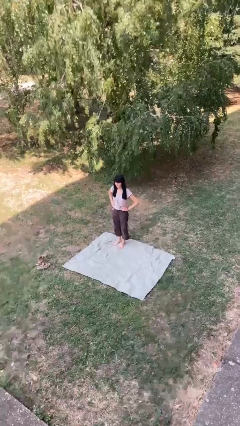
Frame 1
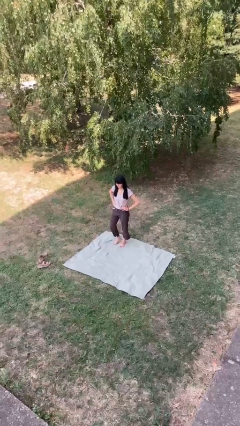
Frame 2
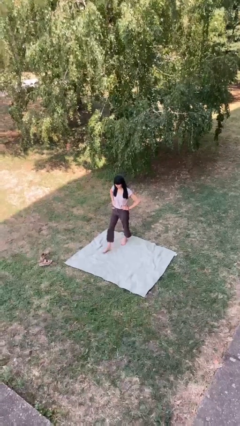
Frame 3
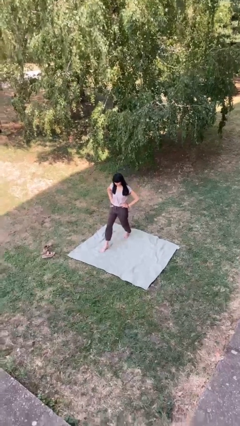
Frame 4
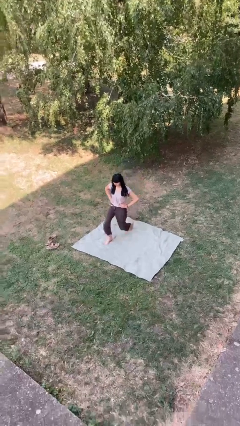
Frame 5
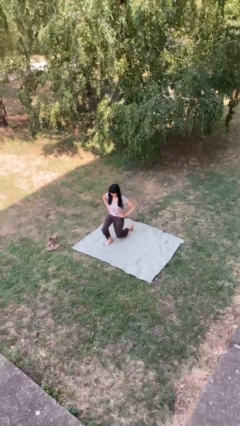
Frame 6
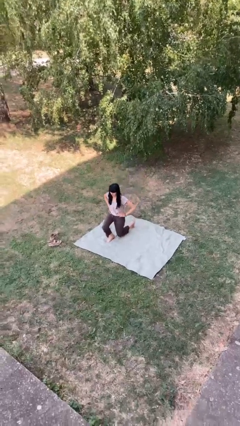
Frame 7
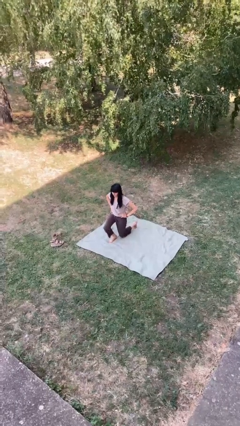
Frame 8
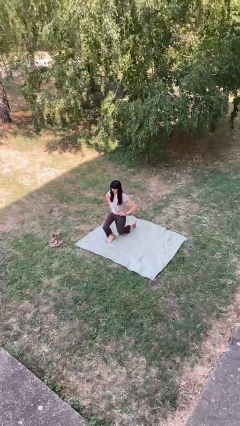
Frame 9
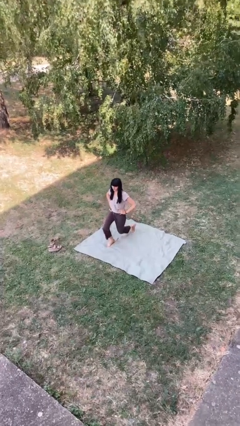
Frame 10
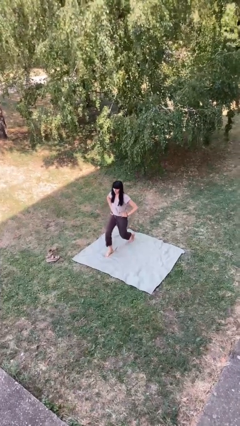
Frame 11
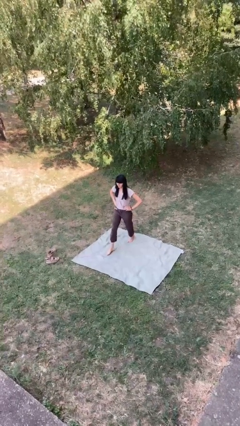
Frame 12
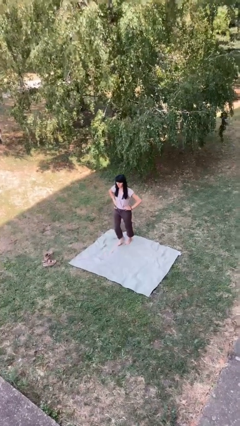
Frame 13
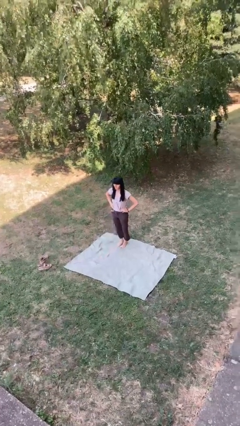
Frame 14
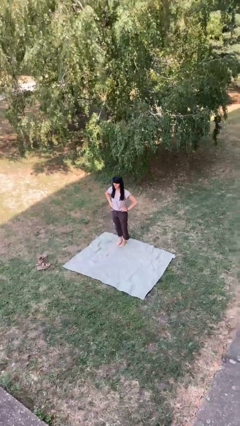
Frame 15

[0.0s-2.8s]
person exercises with lunges

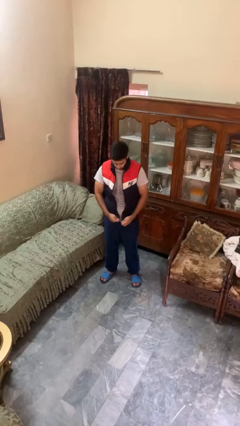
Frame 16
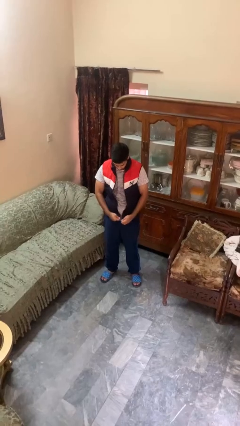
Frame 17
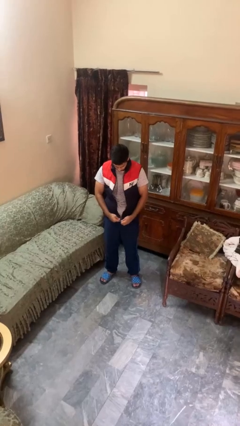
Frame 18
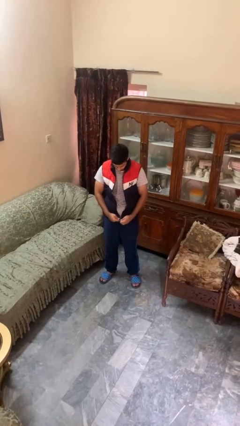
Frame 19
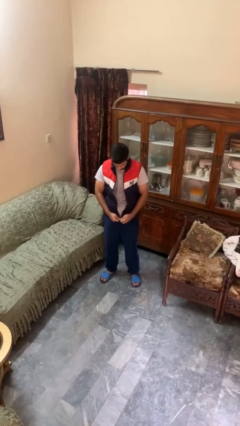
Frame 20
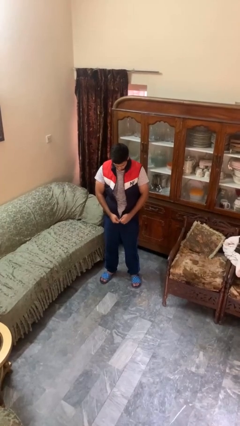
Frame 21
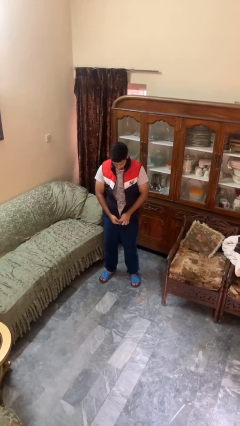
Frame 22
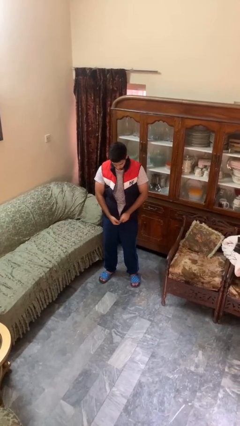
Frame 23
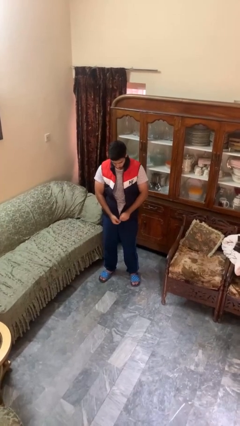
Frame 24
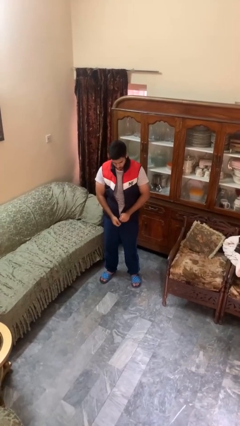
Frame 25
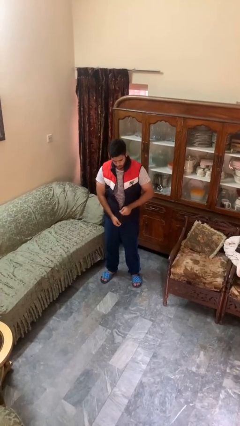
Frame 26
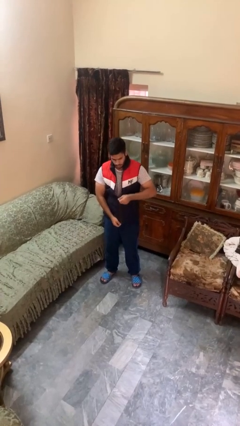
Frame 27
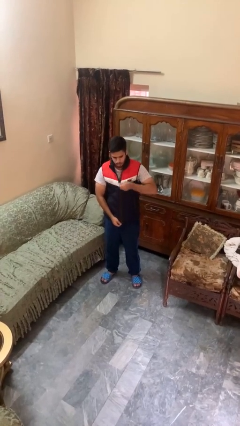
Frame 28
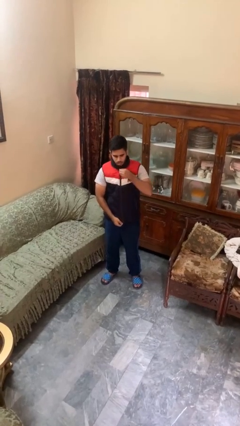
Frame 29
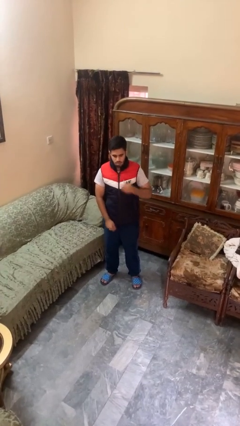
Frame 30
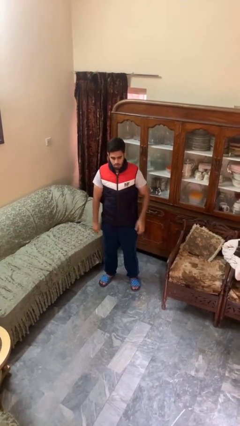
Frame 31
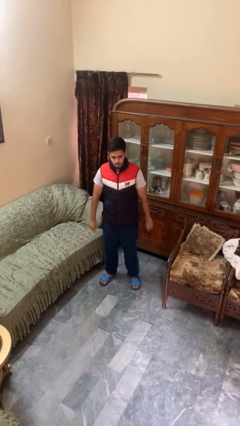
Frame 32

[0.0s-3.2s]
person zips up jacket

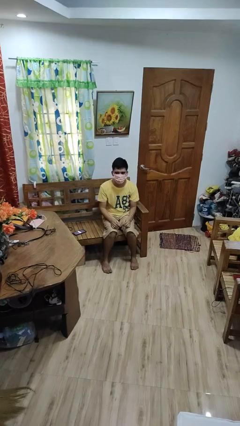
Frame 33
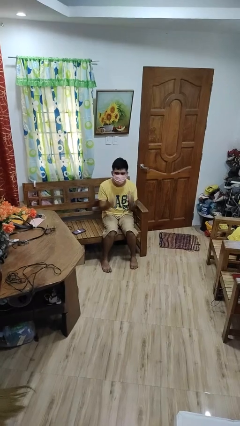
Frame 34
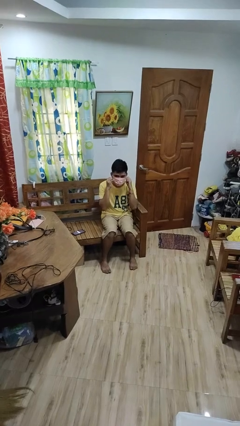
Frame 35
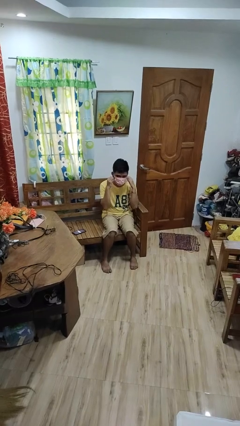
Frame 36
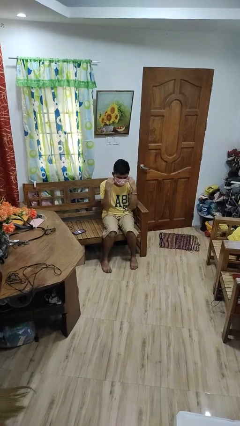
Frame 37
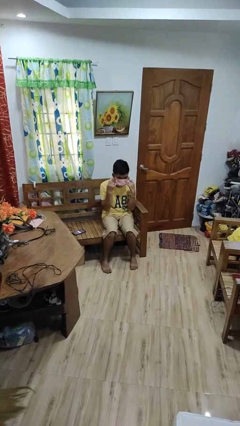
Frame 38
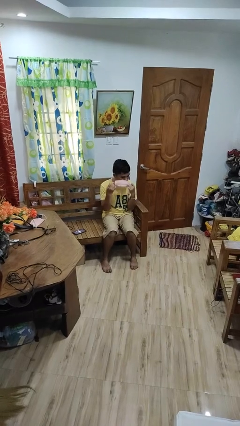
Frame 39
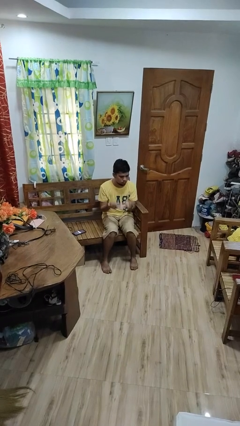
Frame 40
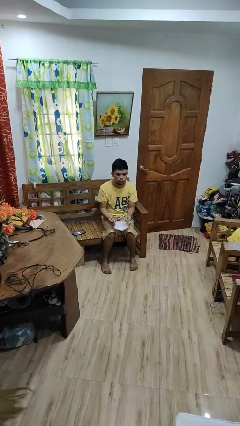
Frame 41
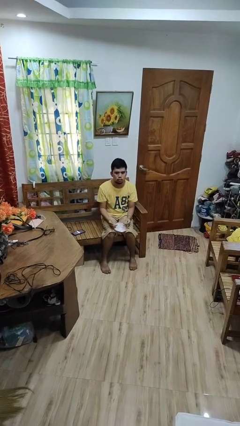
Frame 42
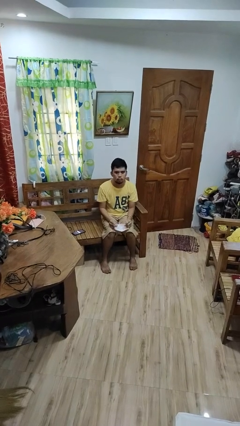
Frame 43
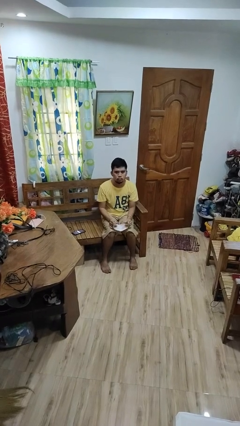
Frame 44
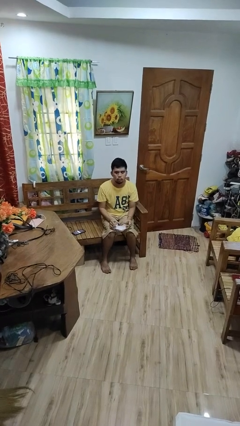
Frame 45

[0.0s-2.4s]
person takes off facemask

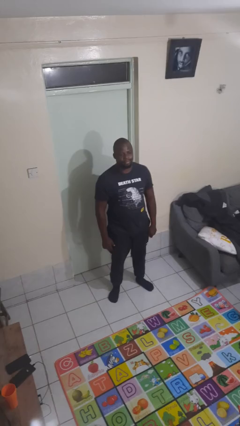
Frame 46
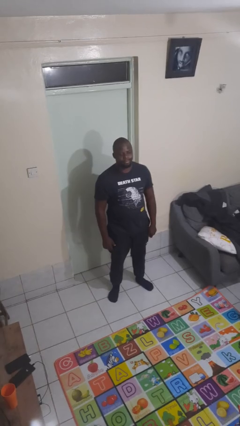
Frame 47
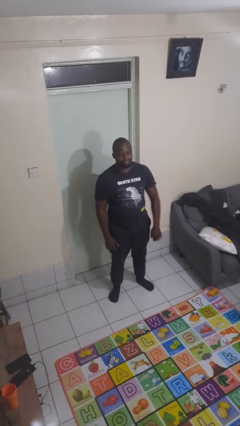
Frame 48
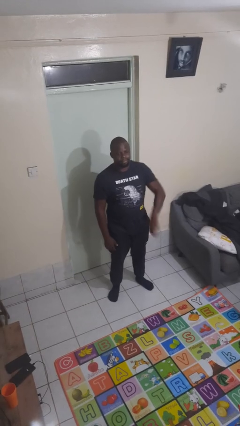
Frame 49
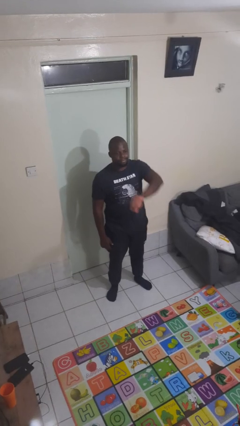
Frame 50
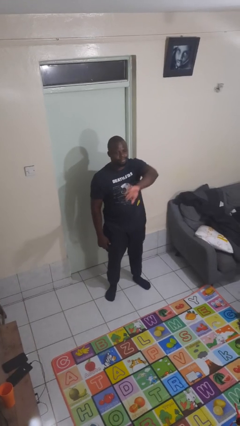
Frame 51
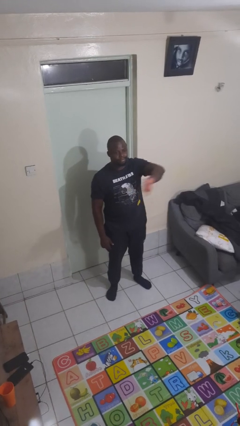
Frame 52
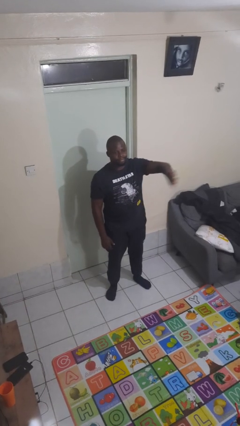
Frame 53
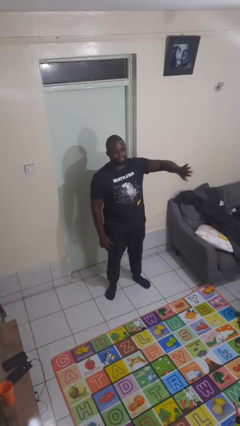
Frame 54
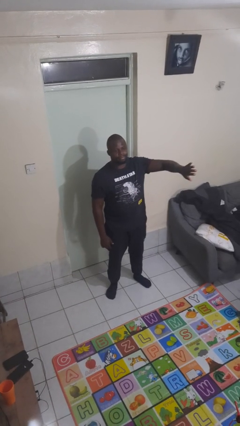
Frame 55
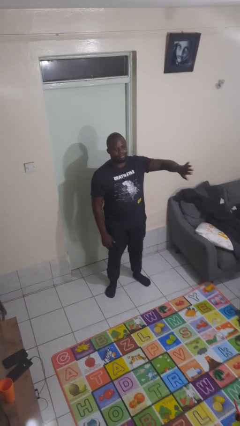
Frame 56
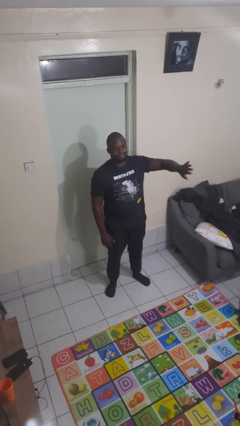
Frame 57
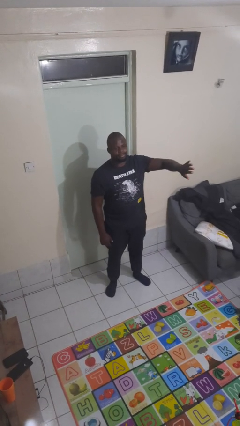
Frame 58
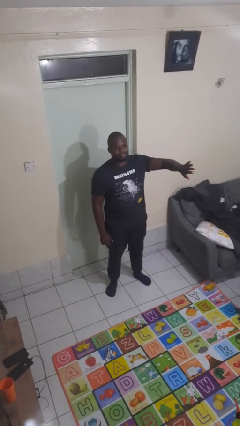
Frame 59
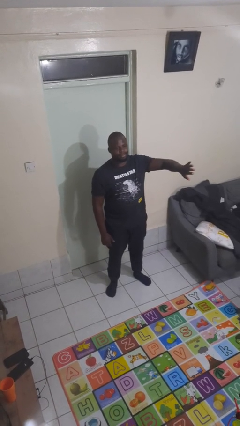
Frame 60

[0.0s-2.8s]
person gestures swipe left

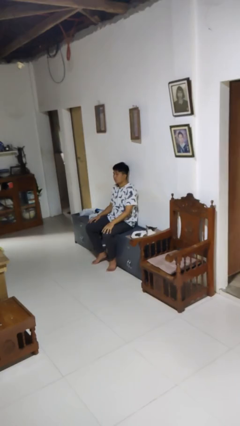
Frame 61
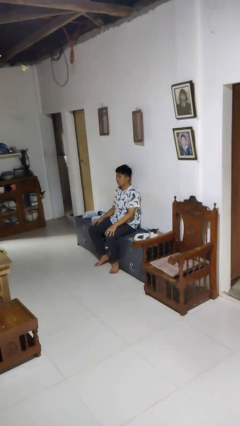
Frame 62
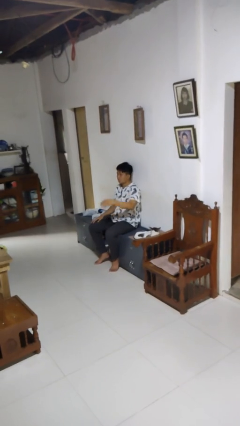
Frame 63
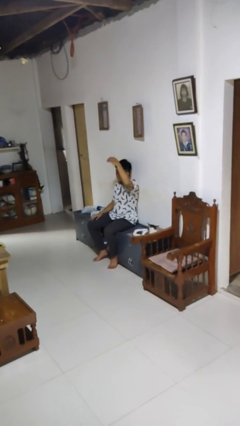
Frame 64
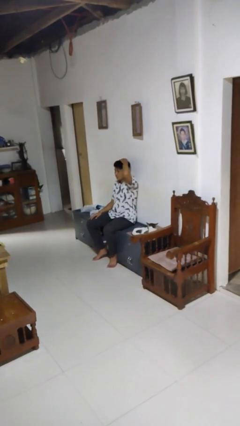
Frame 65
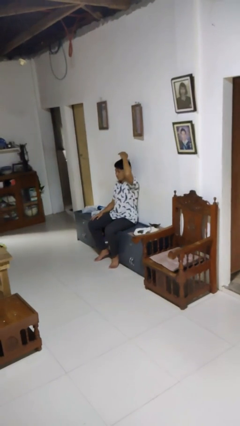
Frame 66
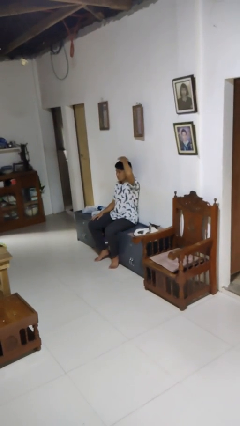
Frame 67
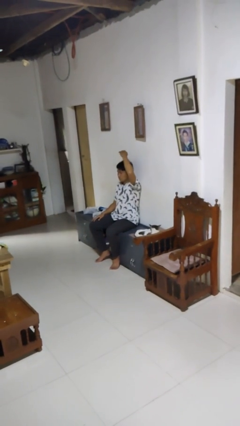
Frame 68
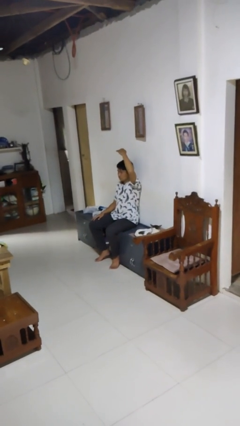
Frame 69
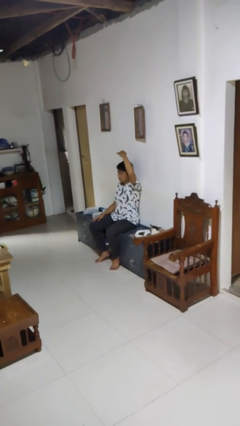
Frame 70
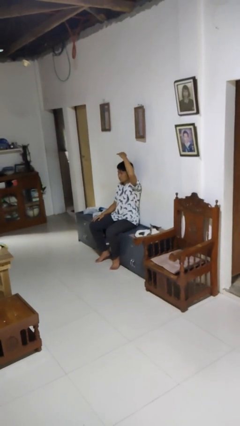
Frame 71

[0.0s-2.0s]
person pats head

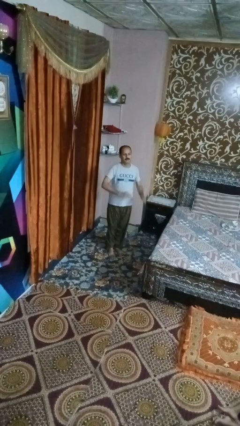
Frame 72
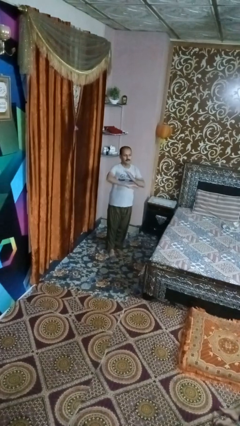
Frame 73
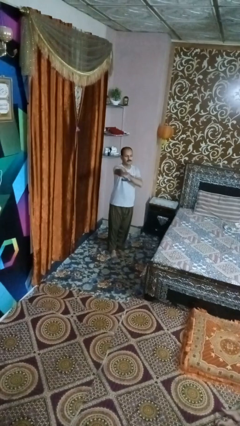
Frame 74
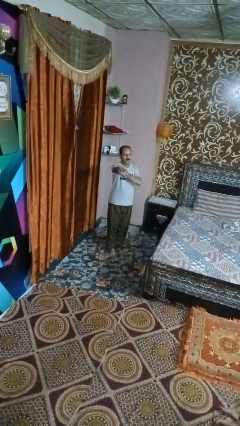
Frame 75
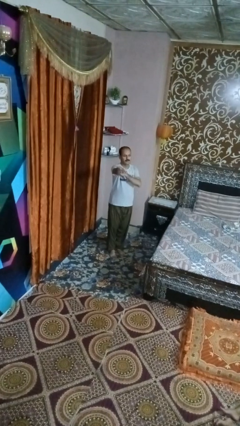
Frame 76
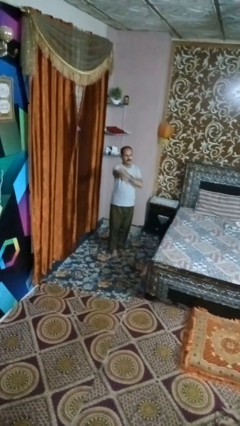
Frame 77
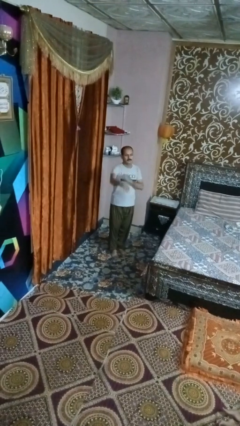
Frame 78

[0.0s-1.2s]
person karate chop

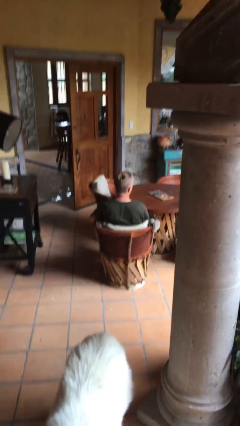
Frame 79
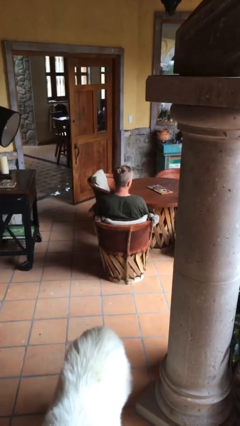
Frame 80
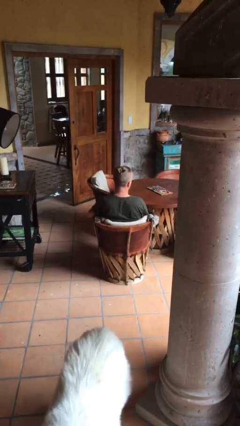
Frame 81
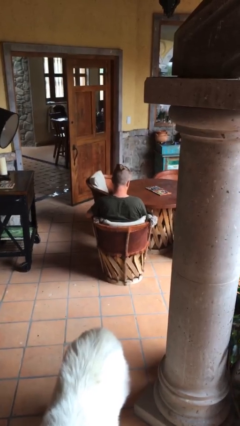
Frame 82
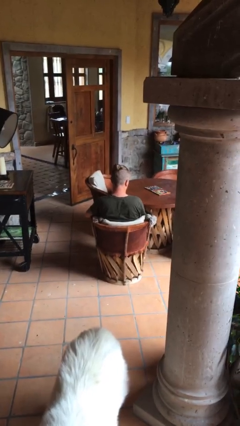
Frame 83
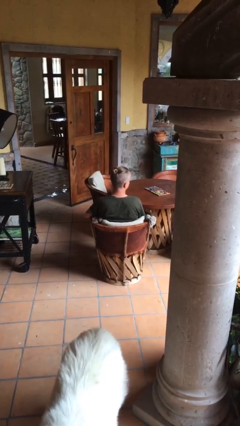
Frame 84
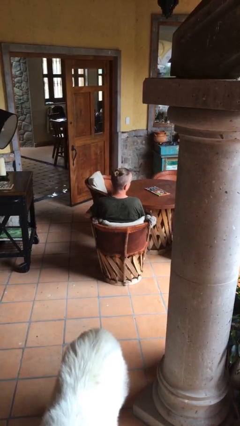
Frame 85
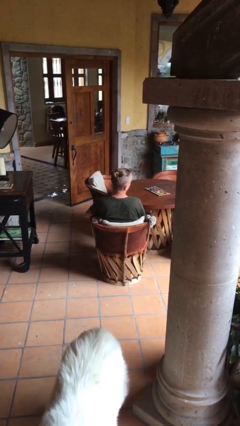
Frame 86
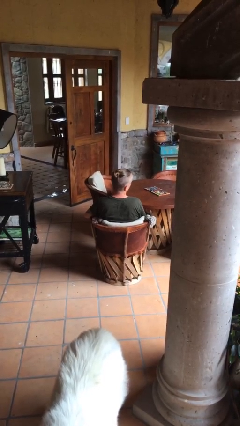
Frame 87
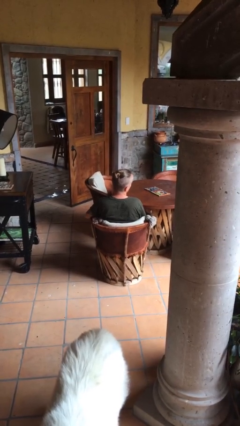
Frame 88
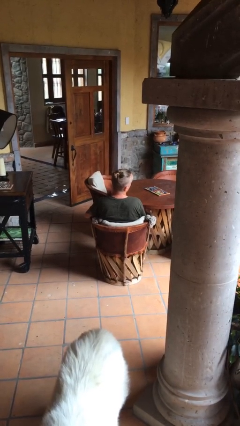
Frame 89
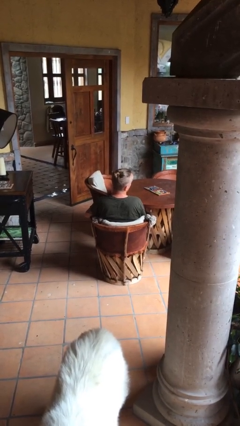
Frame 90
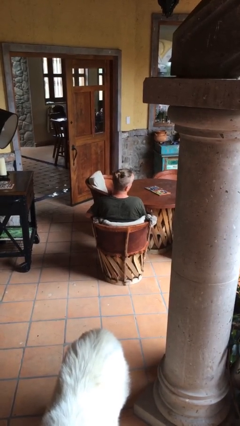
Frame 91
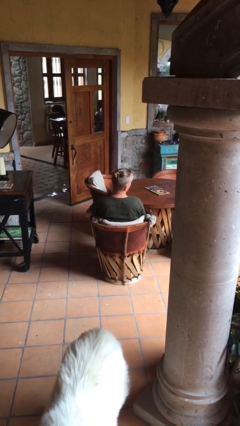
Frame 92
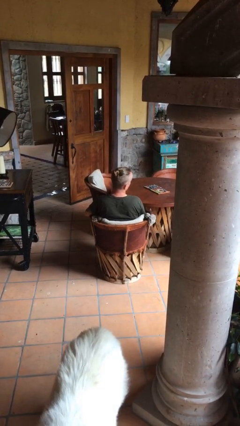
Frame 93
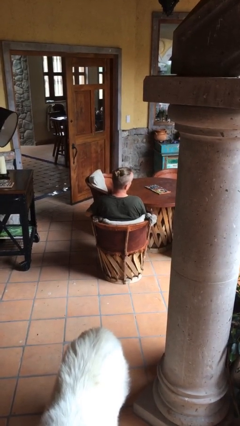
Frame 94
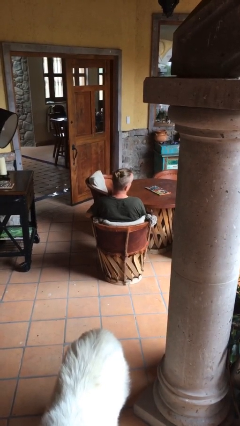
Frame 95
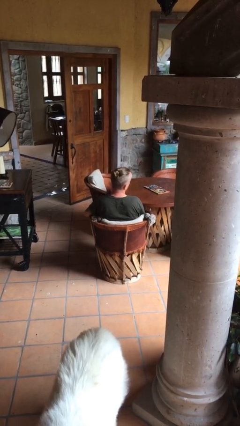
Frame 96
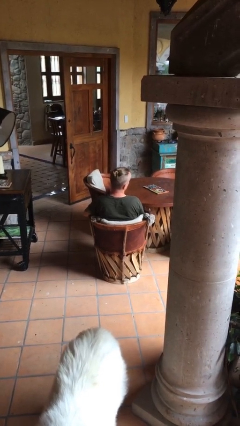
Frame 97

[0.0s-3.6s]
person uses television remote
